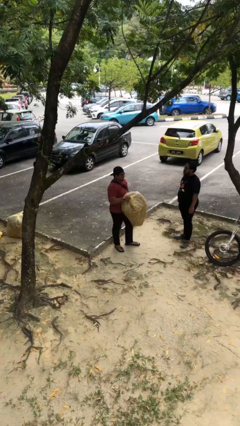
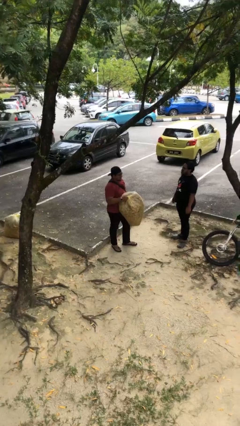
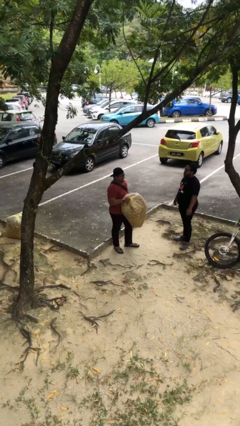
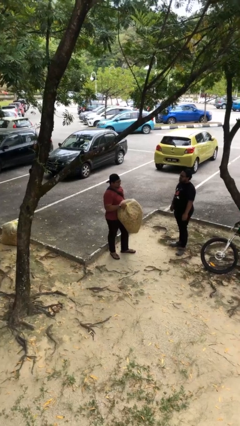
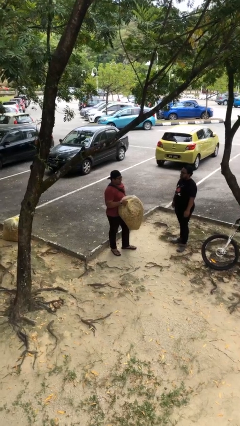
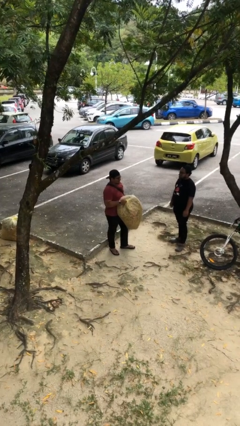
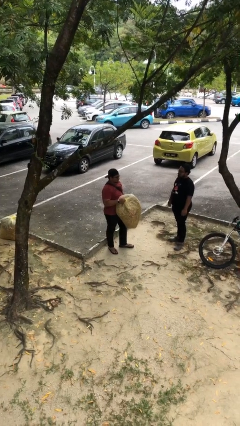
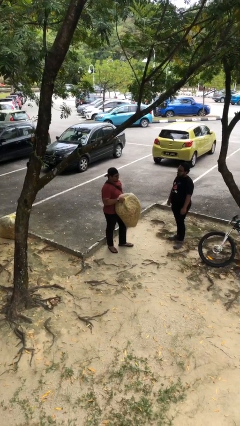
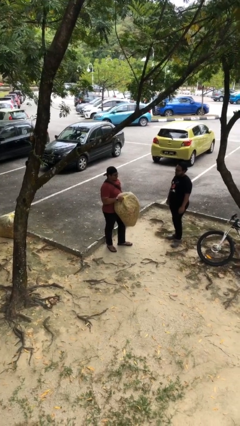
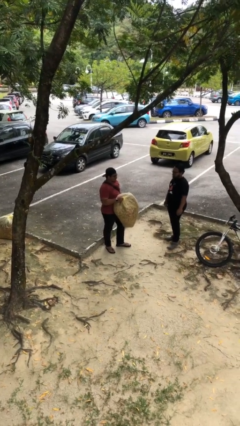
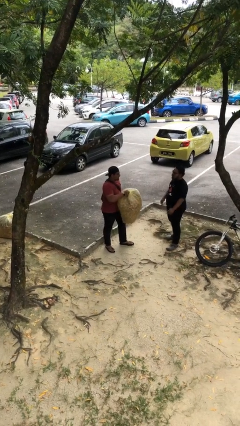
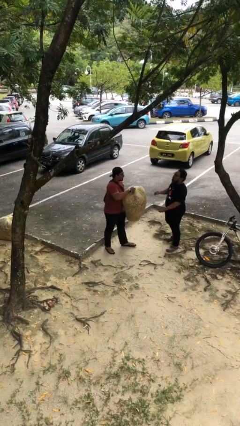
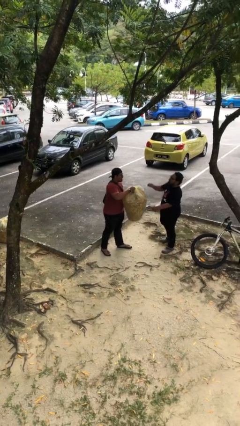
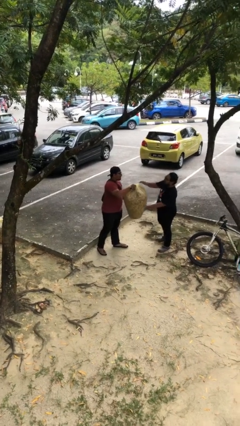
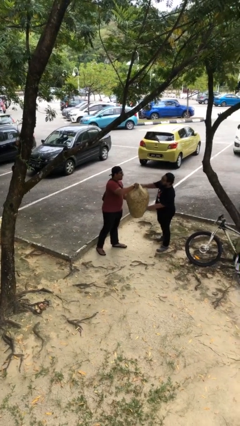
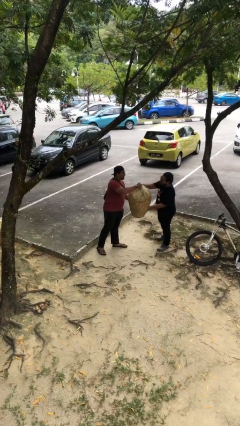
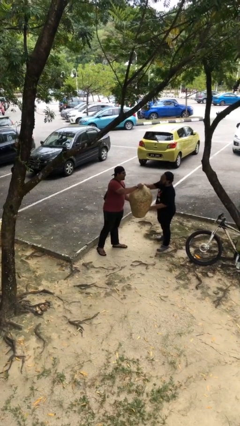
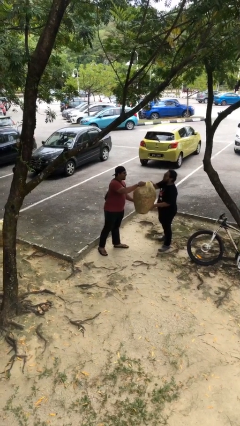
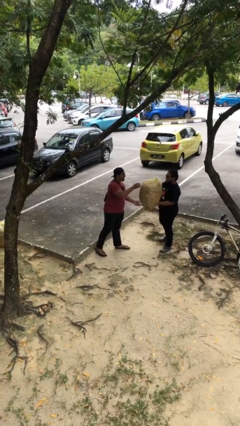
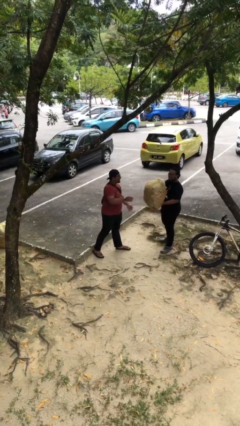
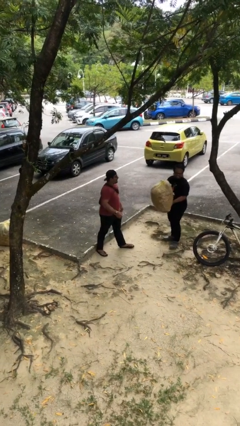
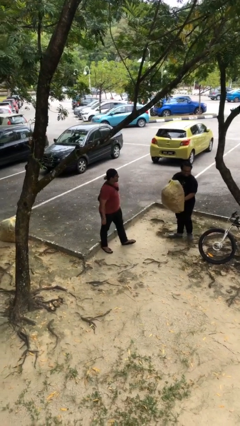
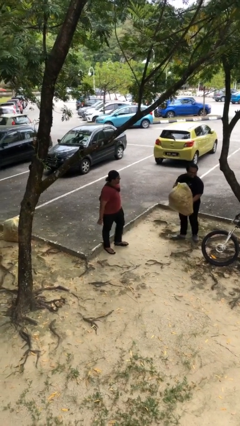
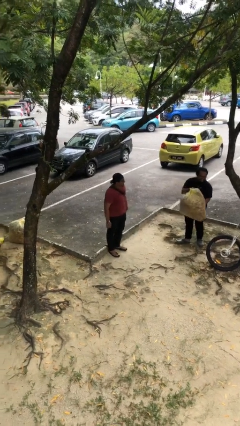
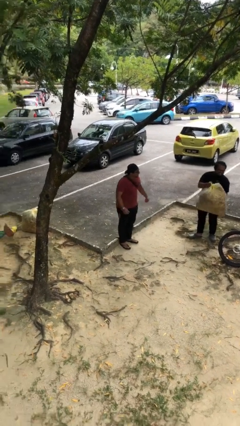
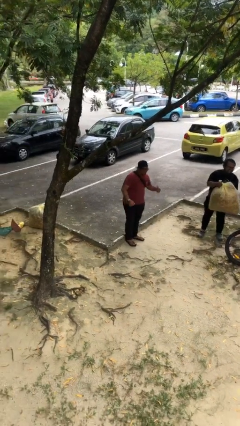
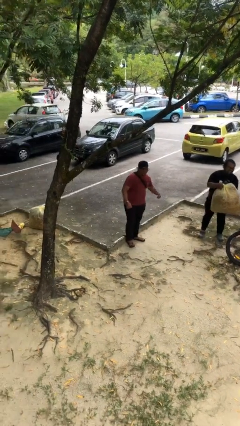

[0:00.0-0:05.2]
person transfers object to person

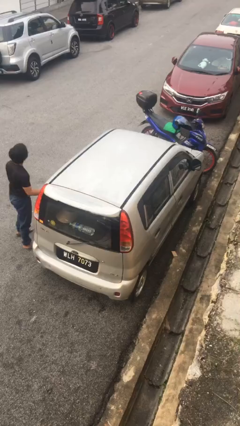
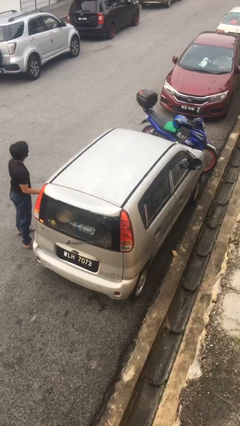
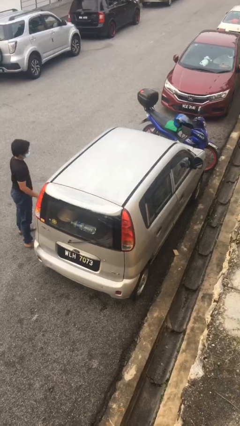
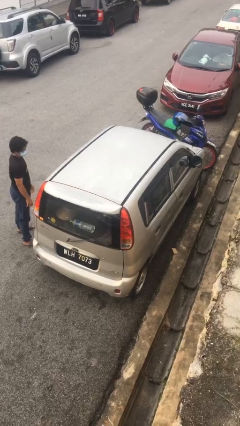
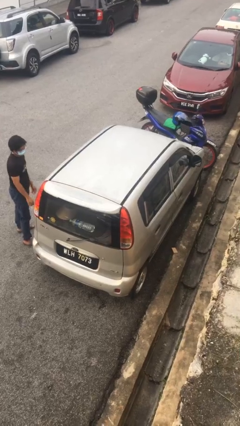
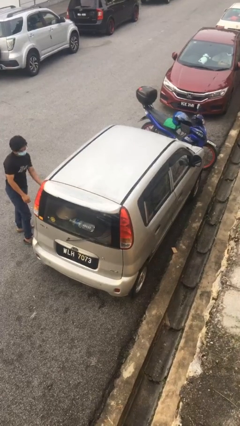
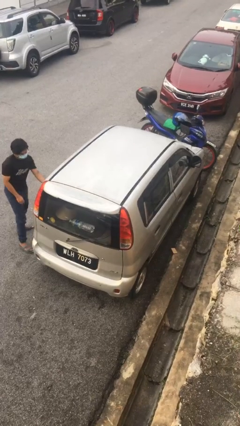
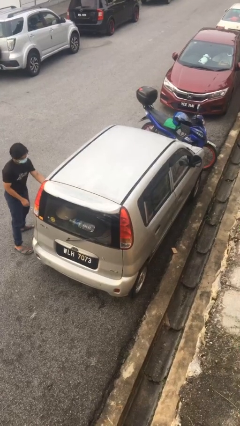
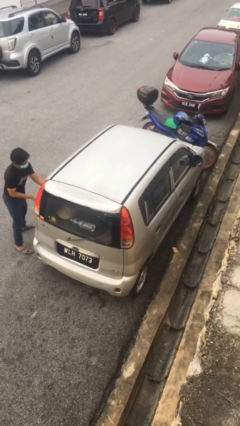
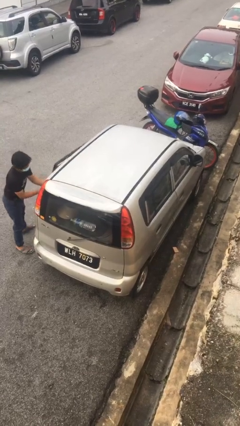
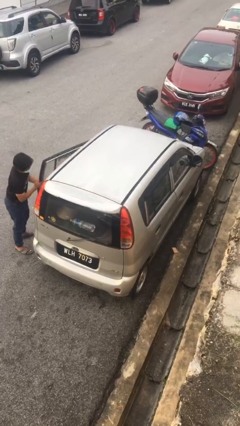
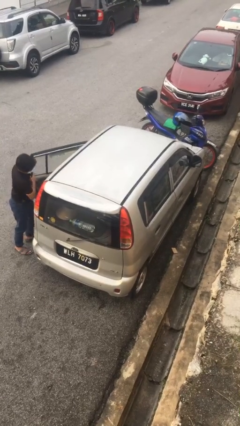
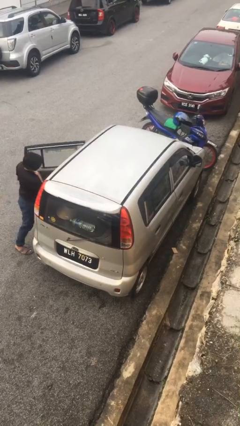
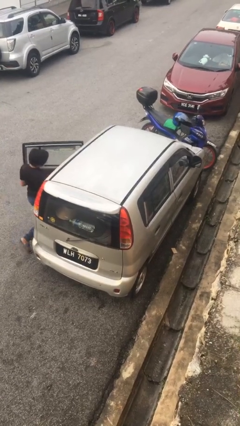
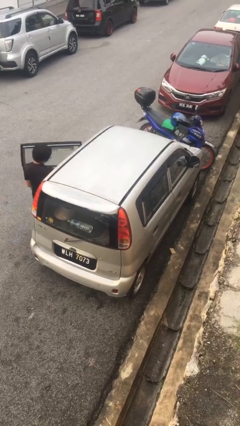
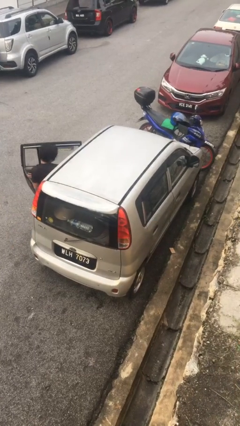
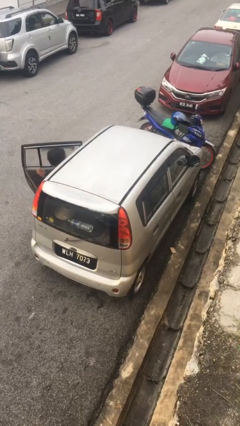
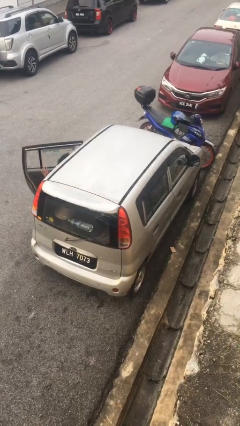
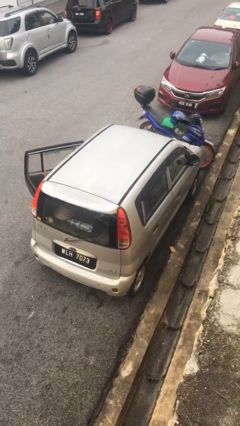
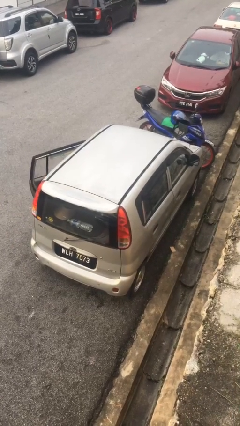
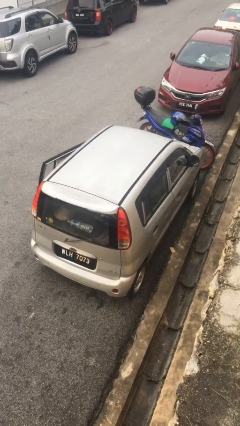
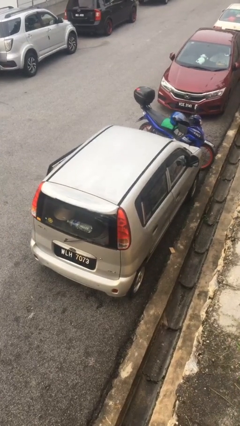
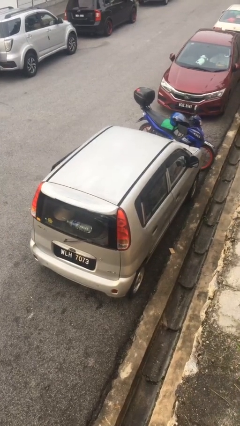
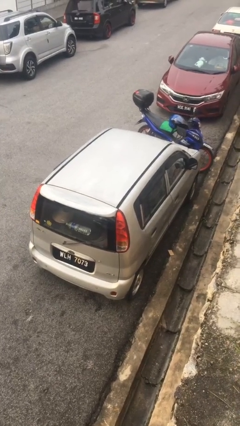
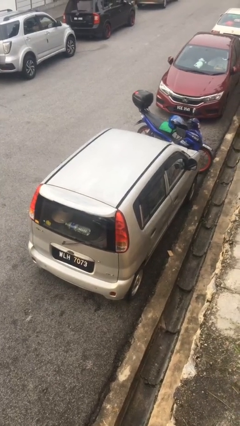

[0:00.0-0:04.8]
car picks up person

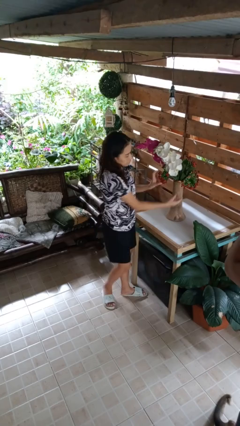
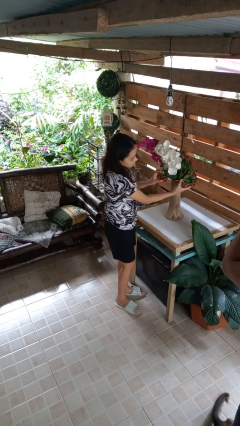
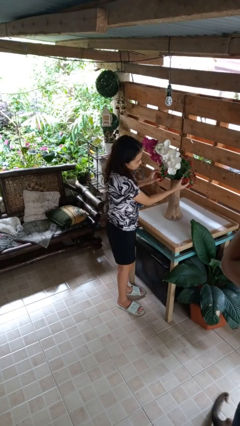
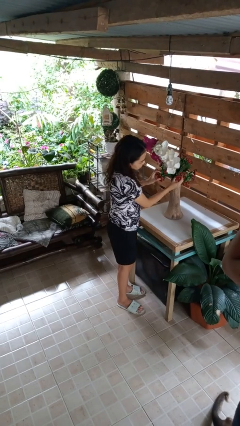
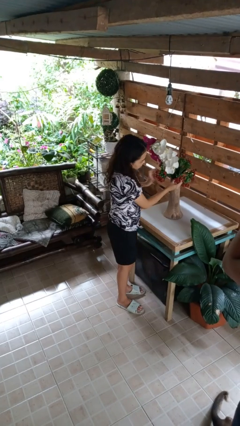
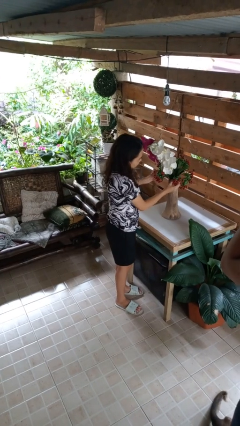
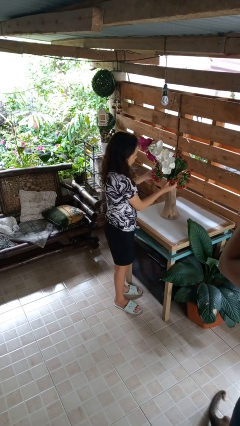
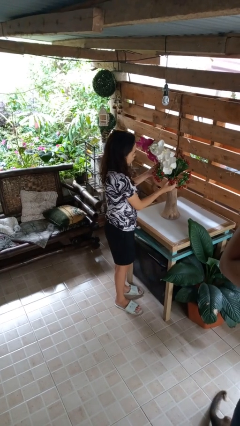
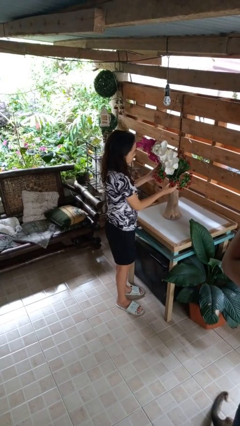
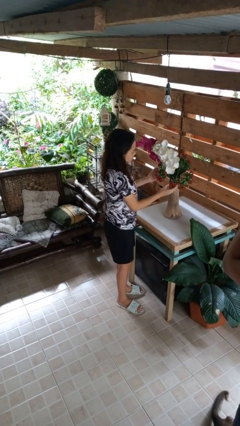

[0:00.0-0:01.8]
person arranges flowers in vase

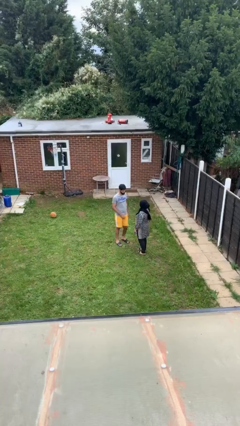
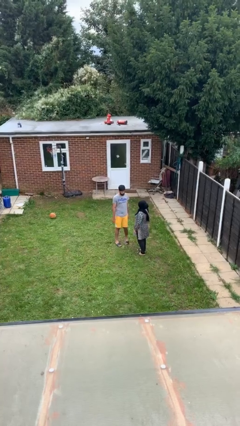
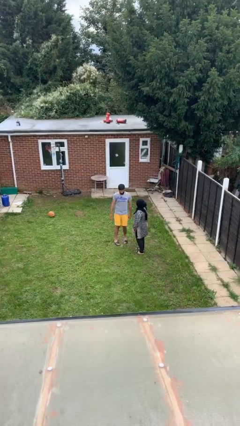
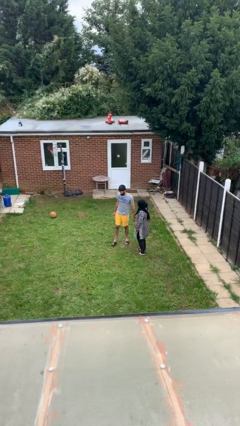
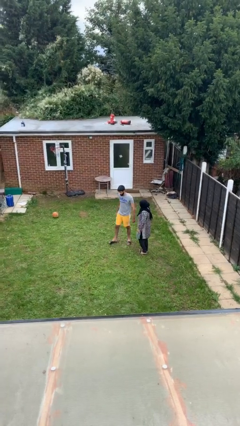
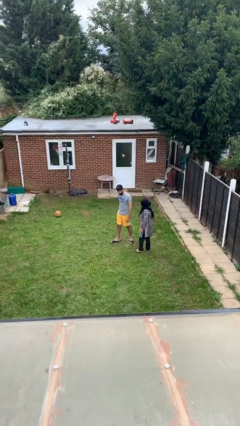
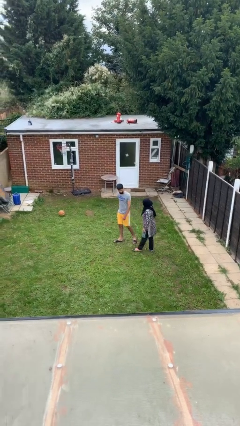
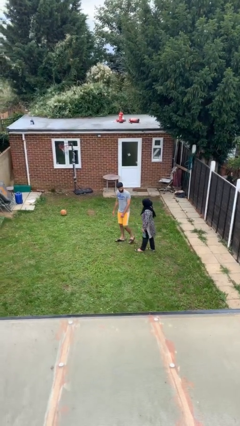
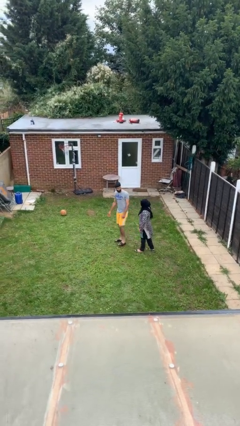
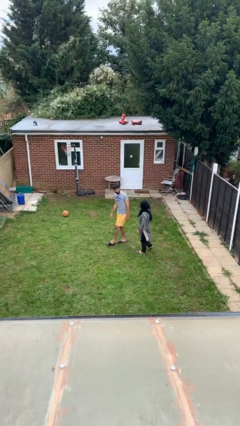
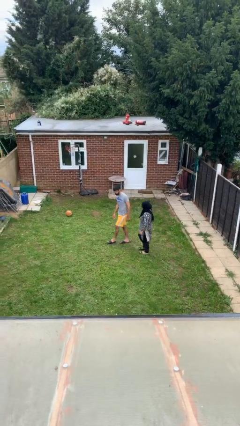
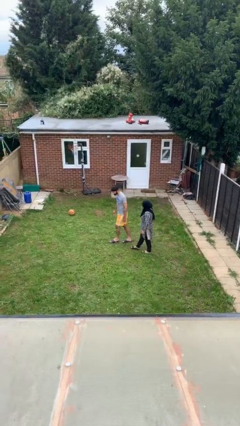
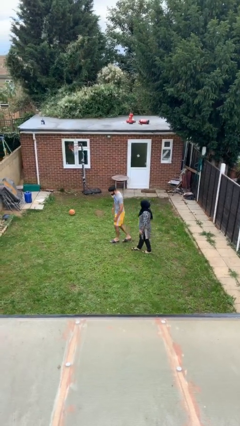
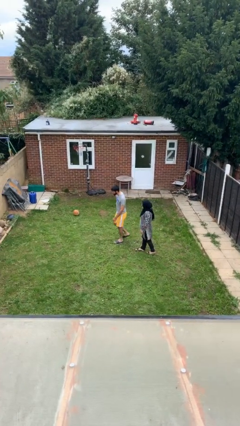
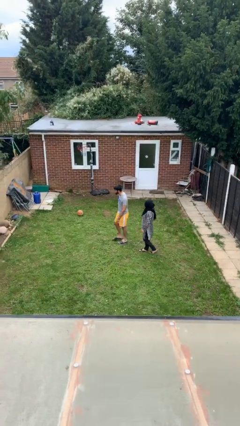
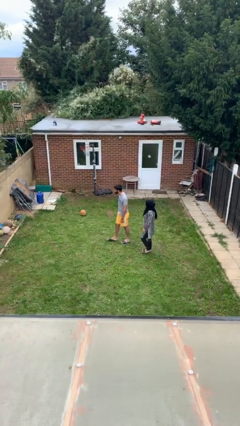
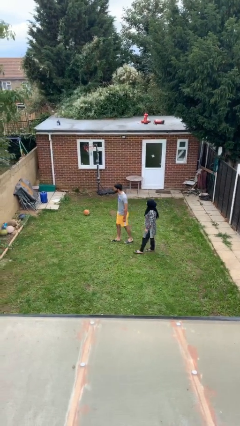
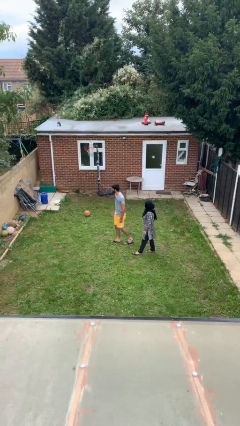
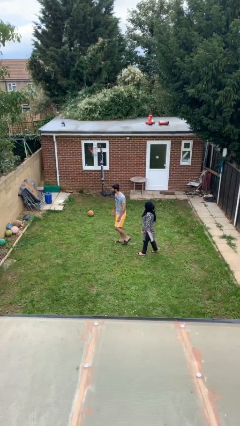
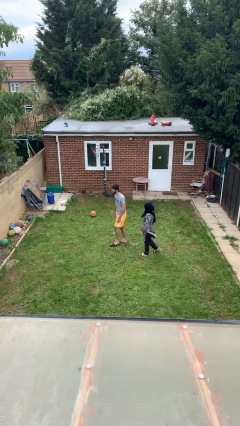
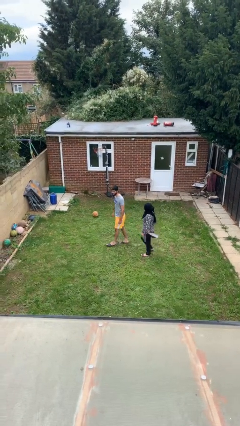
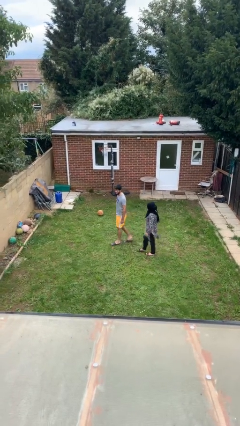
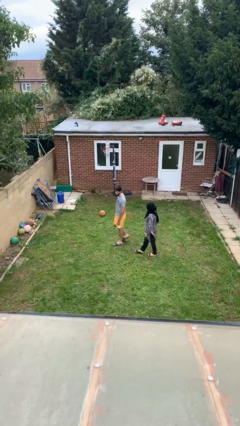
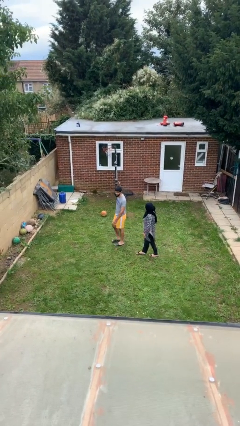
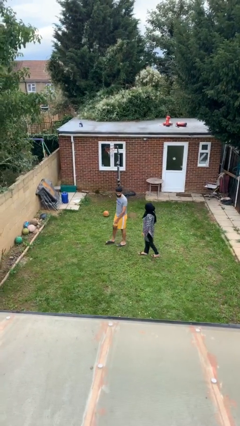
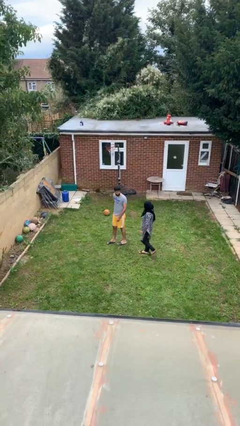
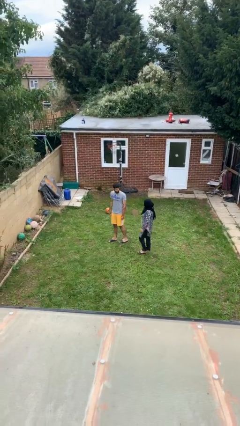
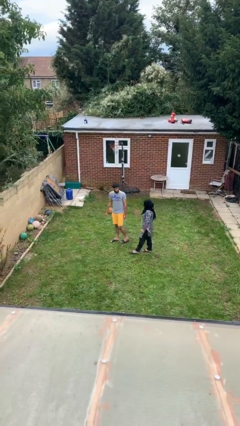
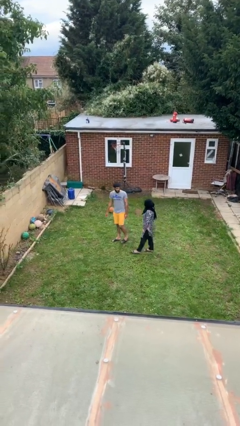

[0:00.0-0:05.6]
person talks to person

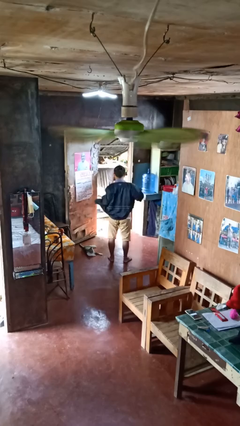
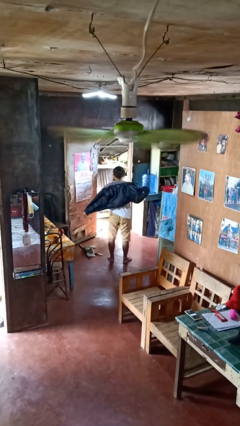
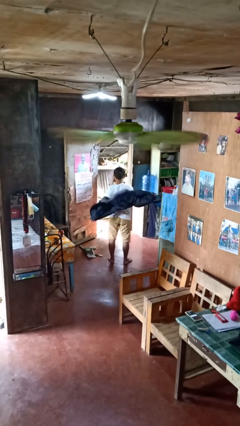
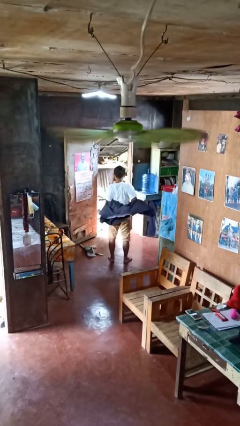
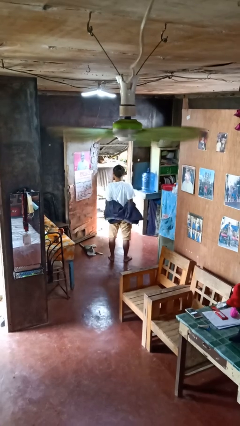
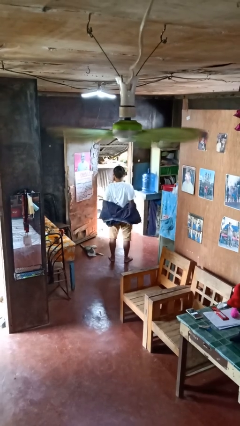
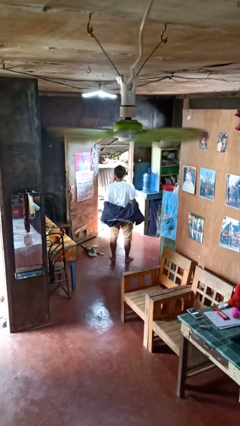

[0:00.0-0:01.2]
person takes off jacket
